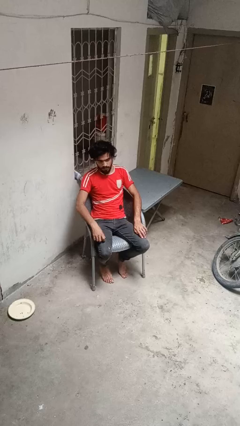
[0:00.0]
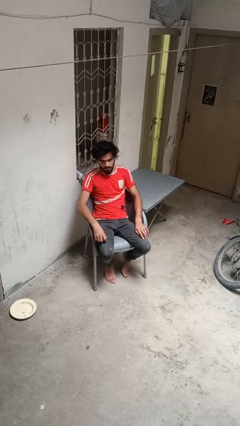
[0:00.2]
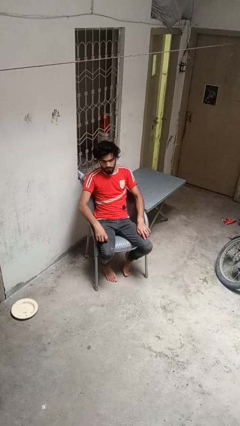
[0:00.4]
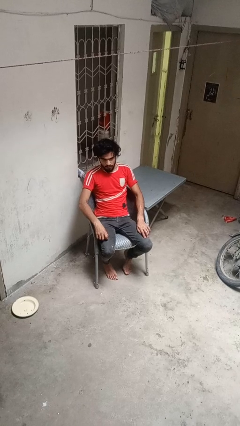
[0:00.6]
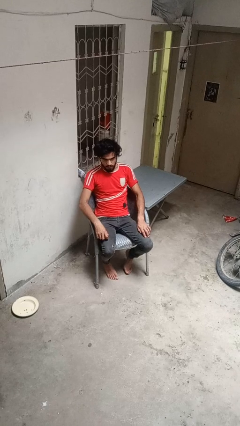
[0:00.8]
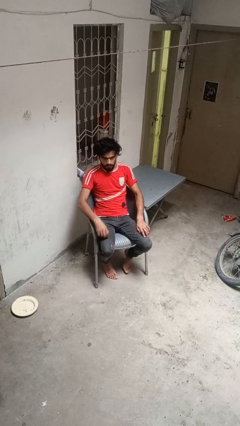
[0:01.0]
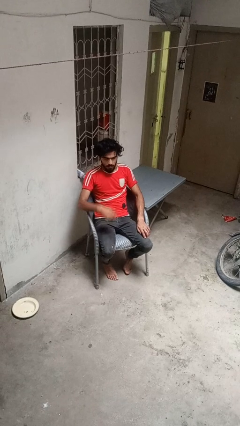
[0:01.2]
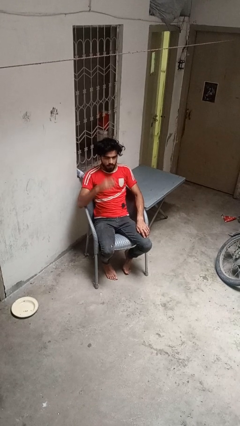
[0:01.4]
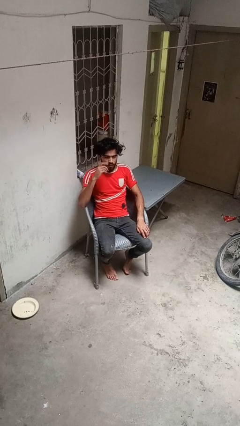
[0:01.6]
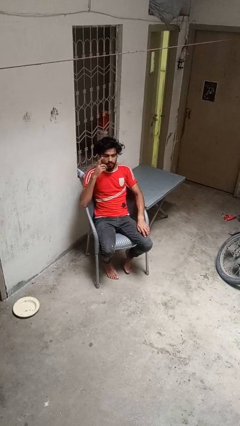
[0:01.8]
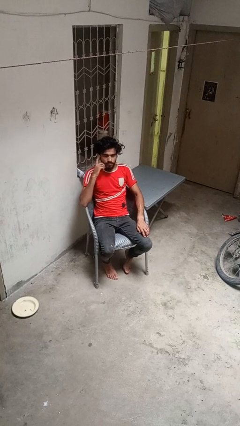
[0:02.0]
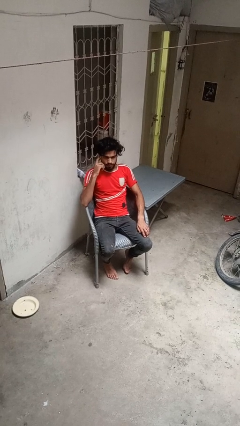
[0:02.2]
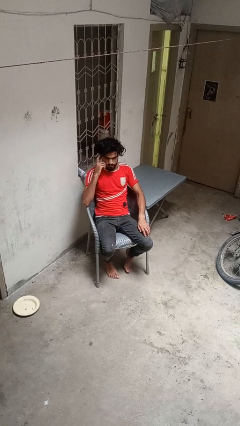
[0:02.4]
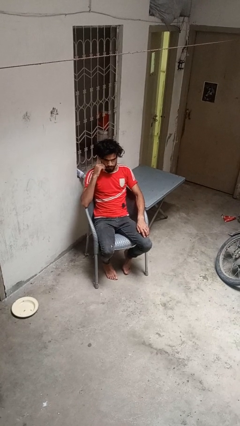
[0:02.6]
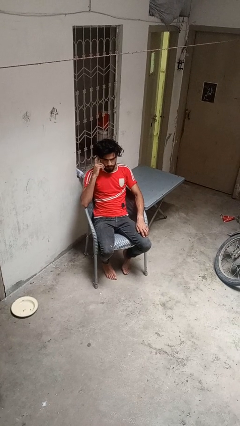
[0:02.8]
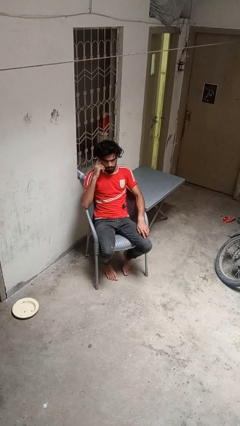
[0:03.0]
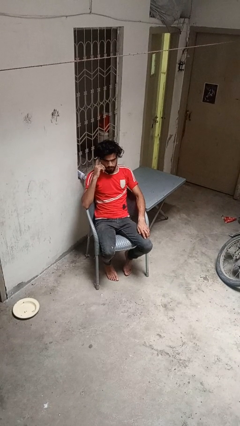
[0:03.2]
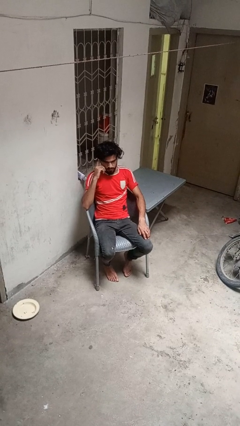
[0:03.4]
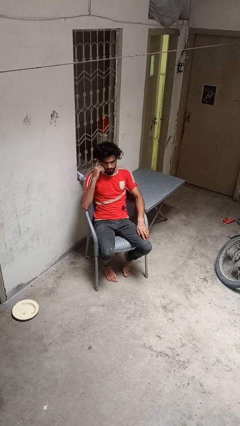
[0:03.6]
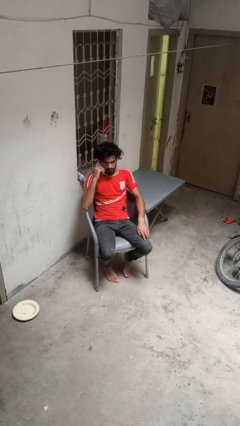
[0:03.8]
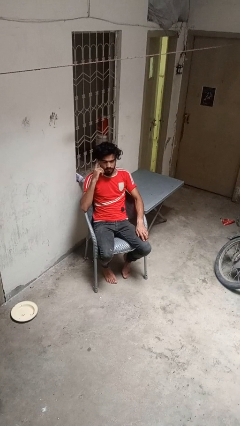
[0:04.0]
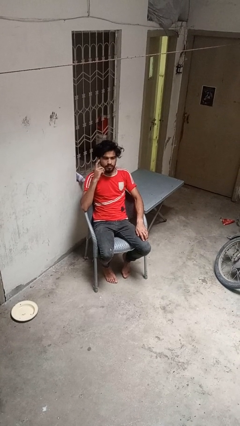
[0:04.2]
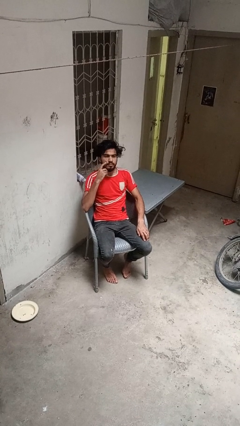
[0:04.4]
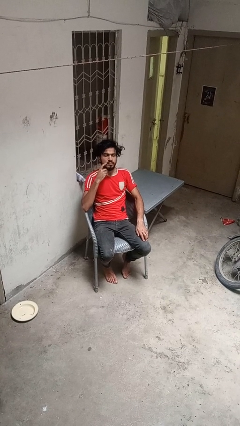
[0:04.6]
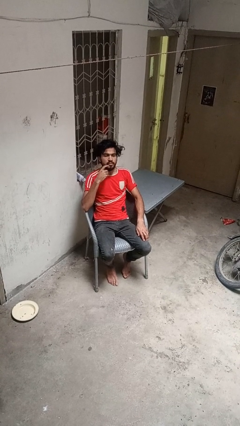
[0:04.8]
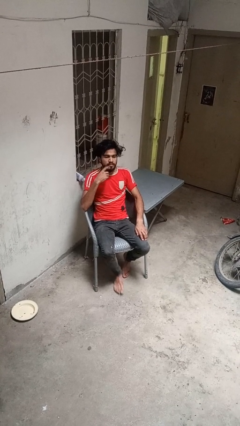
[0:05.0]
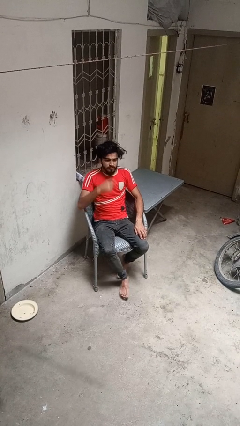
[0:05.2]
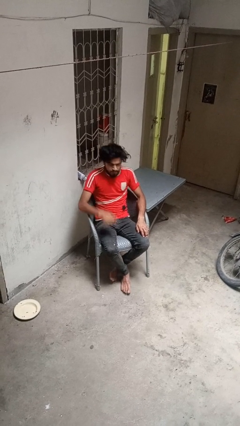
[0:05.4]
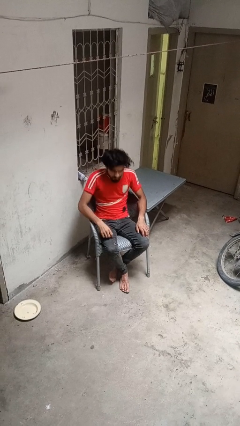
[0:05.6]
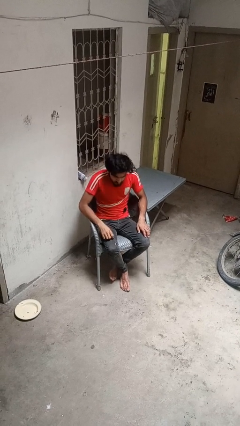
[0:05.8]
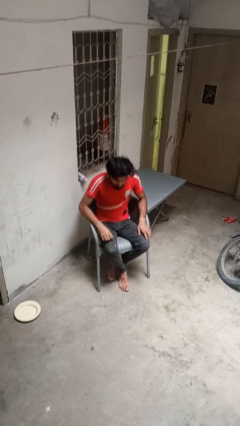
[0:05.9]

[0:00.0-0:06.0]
person strokes chin

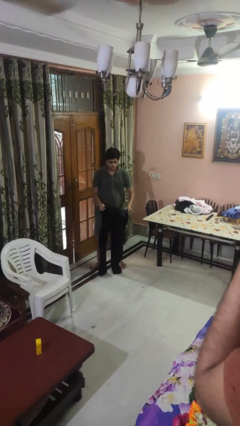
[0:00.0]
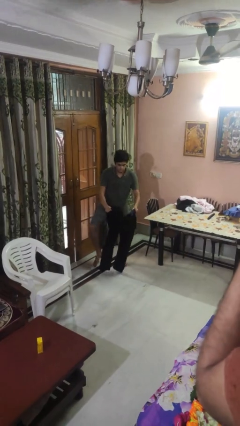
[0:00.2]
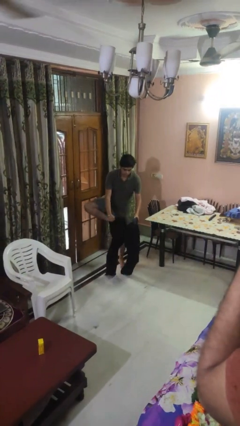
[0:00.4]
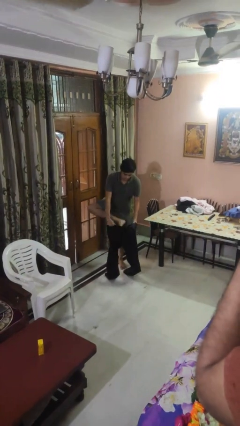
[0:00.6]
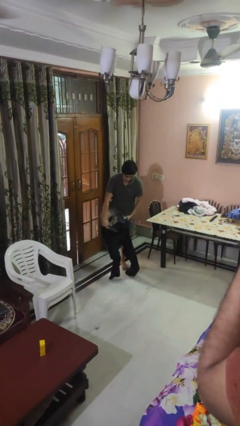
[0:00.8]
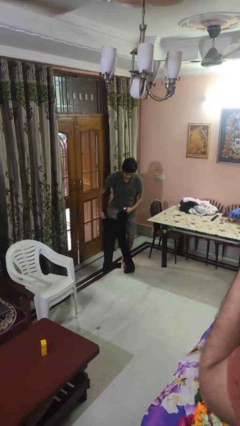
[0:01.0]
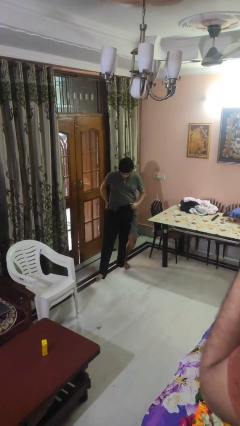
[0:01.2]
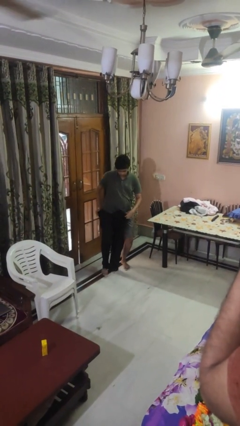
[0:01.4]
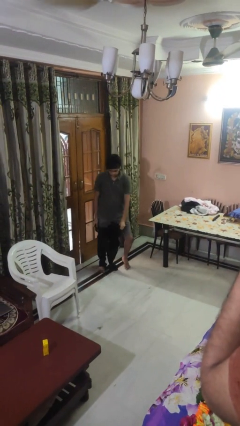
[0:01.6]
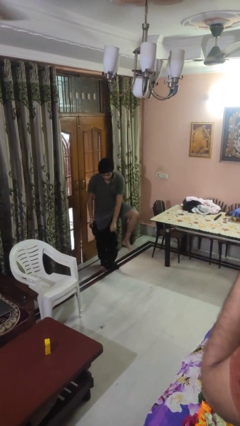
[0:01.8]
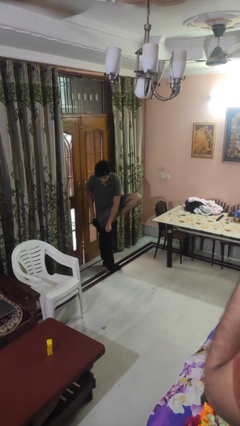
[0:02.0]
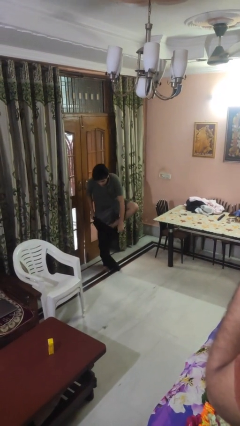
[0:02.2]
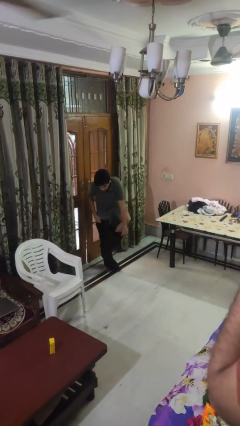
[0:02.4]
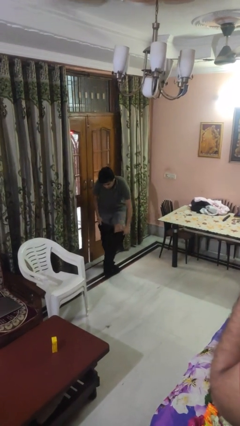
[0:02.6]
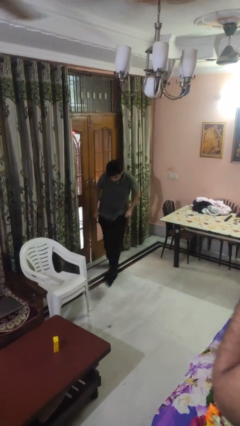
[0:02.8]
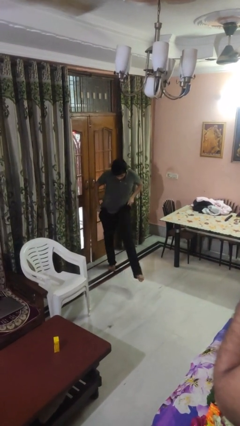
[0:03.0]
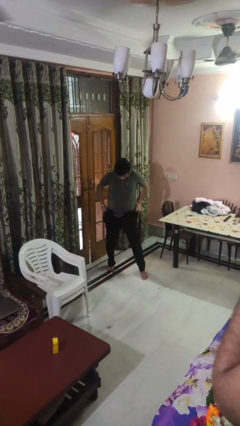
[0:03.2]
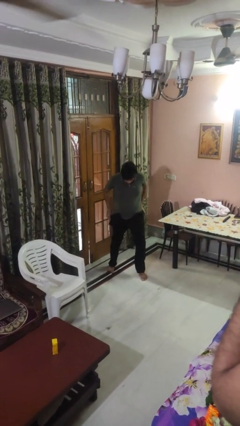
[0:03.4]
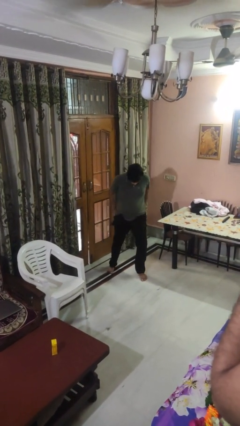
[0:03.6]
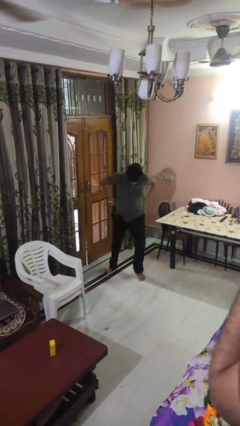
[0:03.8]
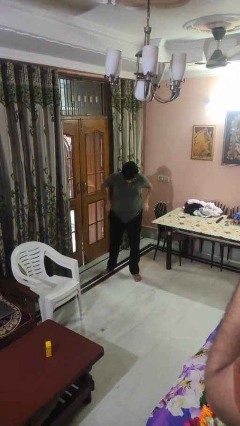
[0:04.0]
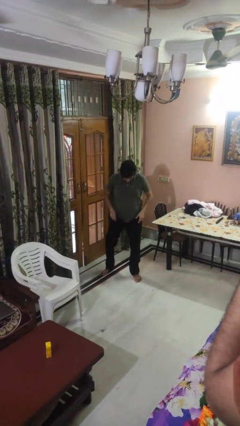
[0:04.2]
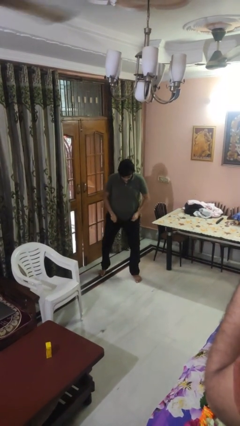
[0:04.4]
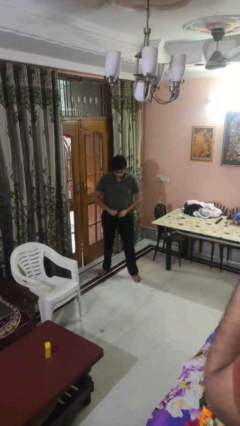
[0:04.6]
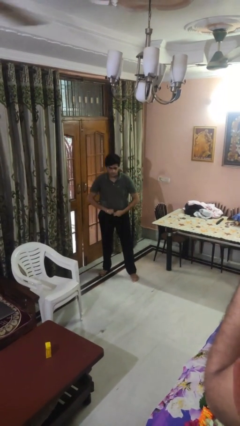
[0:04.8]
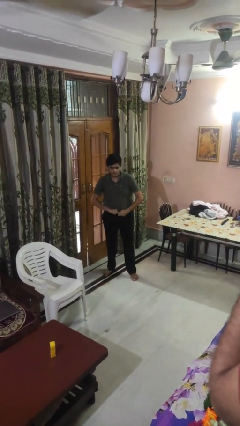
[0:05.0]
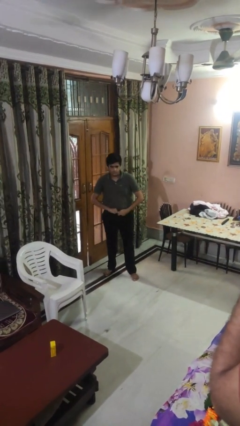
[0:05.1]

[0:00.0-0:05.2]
person puts on pants

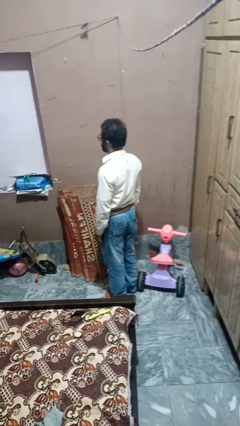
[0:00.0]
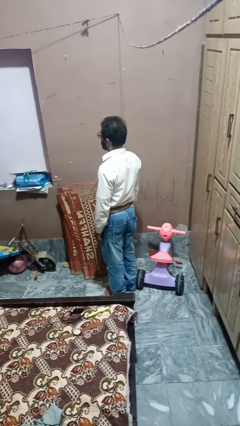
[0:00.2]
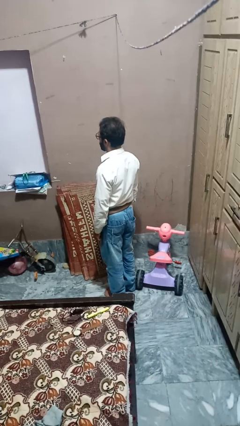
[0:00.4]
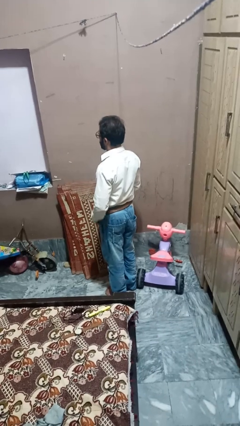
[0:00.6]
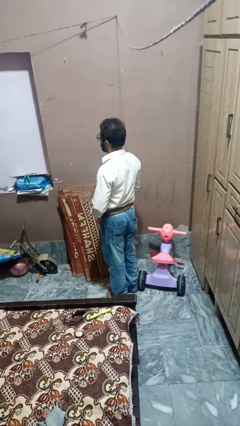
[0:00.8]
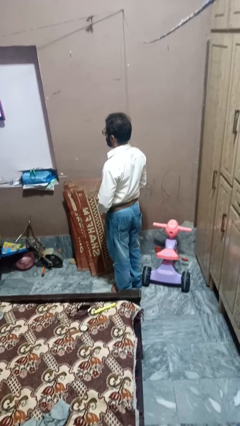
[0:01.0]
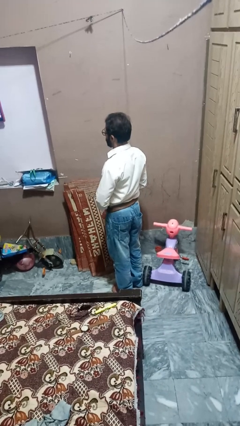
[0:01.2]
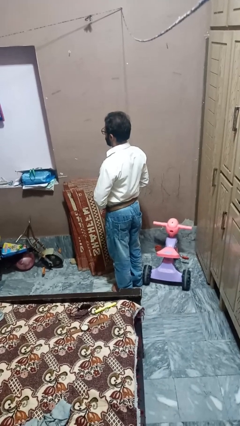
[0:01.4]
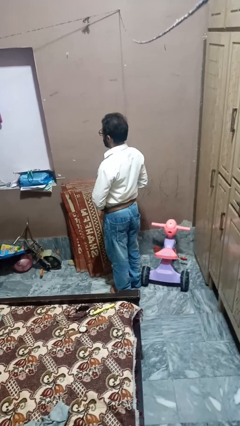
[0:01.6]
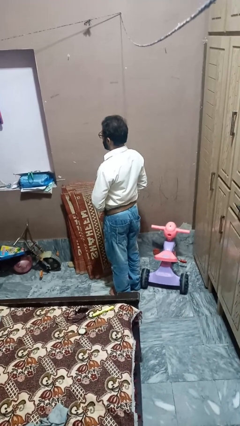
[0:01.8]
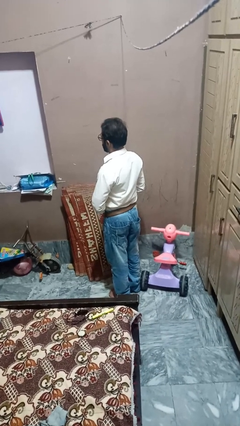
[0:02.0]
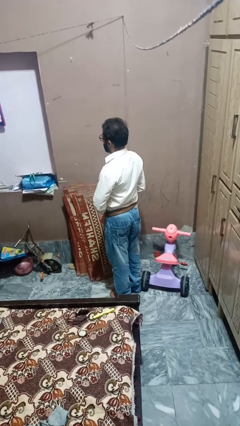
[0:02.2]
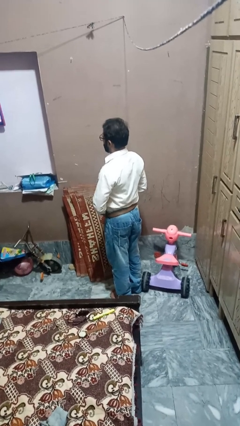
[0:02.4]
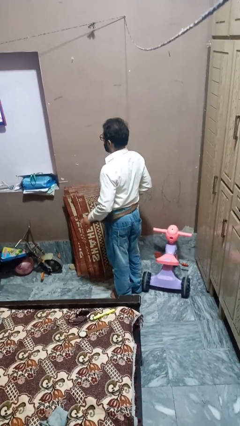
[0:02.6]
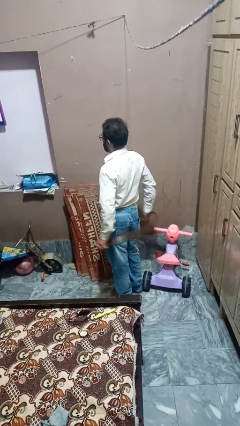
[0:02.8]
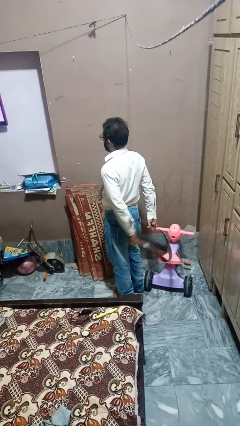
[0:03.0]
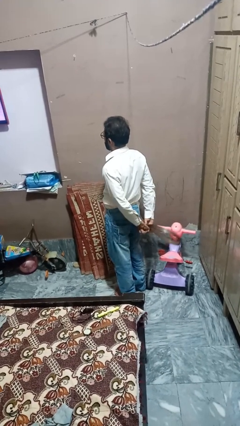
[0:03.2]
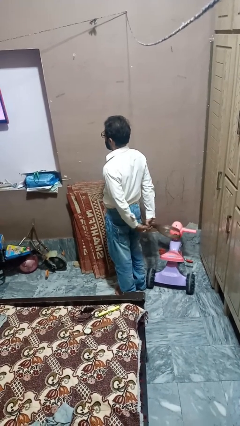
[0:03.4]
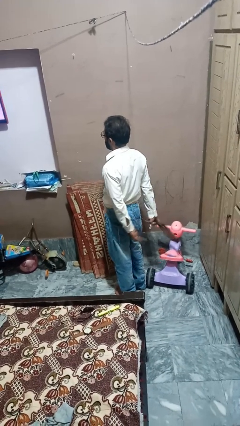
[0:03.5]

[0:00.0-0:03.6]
person takes off belt

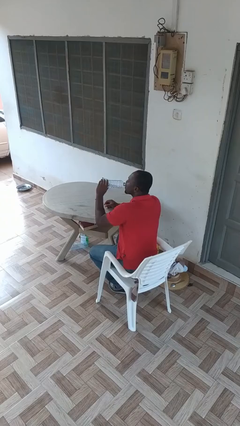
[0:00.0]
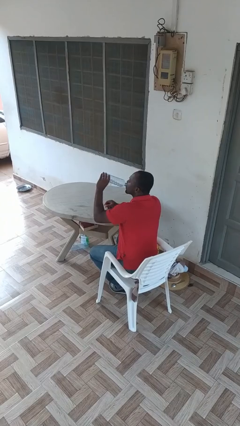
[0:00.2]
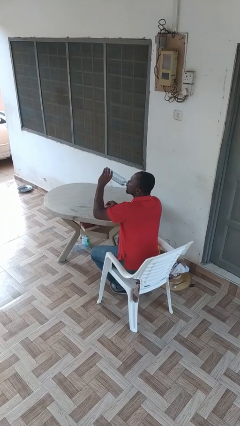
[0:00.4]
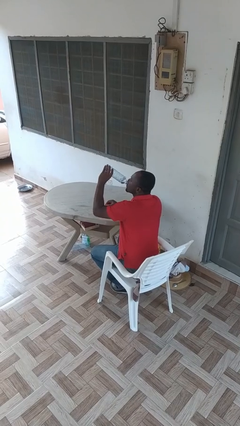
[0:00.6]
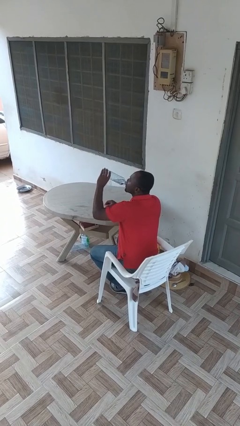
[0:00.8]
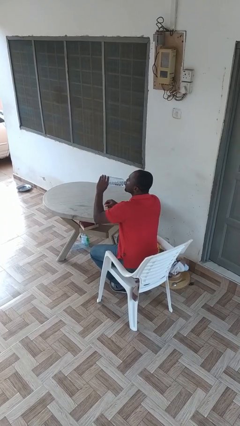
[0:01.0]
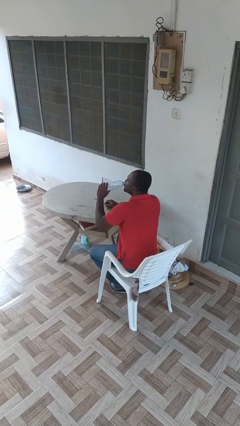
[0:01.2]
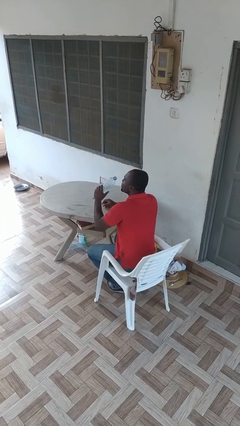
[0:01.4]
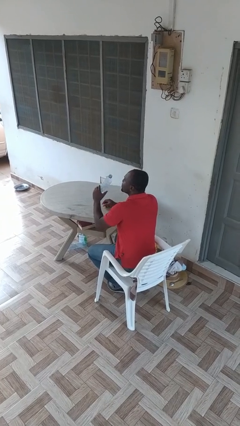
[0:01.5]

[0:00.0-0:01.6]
person drinks from bottle

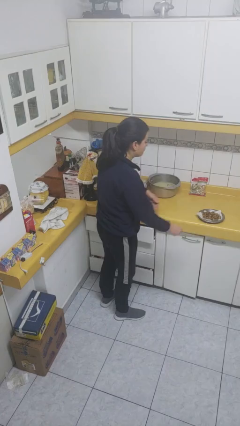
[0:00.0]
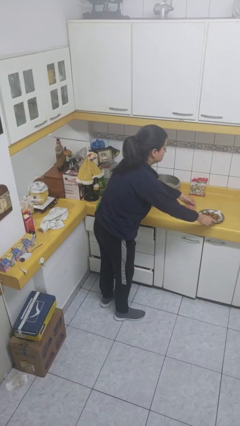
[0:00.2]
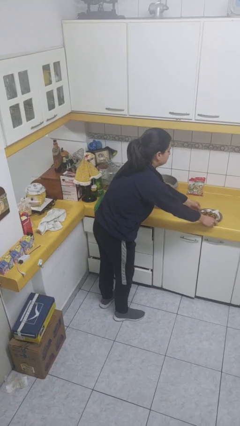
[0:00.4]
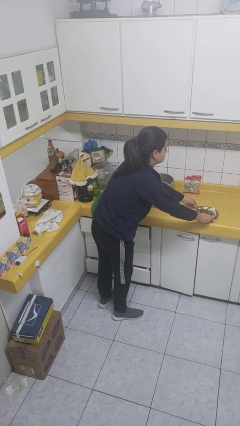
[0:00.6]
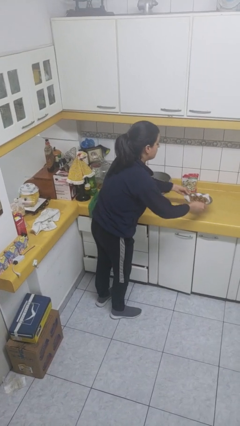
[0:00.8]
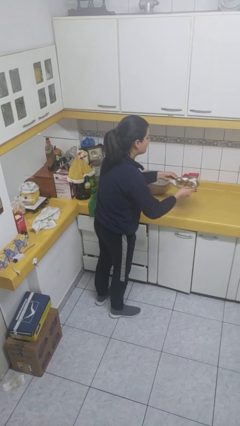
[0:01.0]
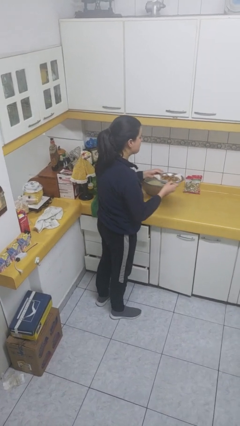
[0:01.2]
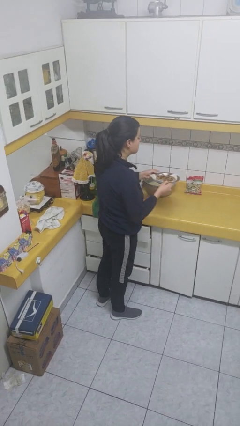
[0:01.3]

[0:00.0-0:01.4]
person picks up object from countertop
